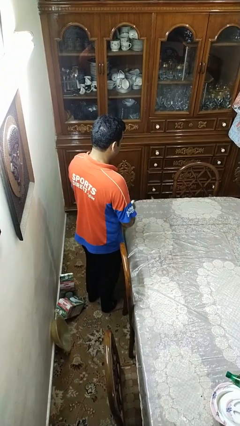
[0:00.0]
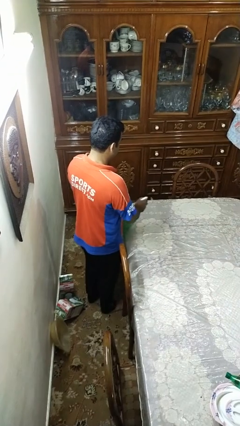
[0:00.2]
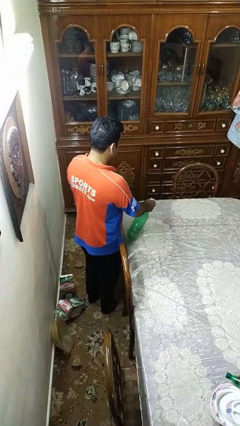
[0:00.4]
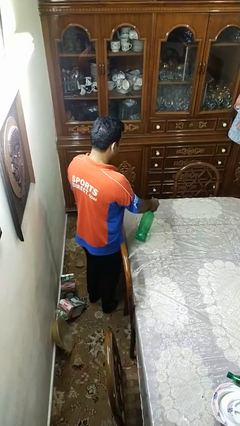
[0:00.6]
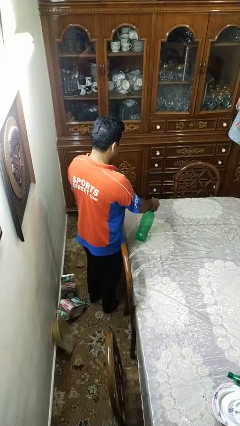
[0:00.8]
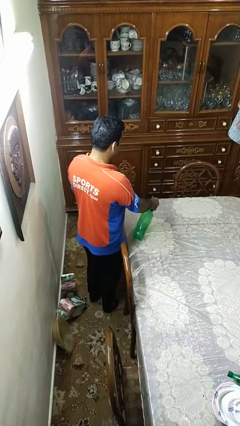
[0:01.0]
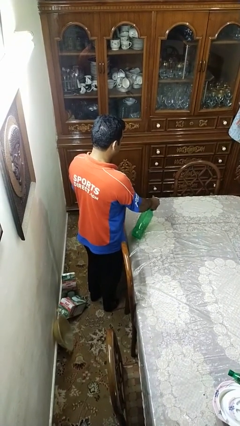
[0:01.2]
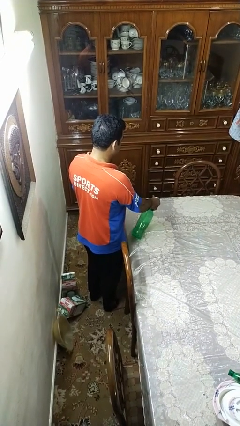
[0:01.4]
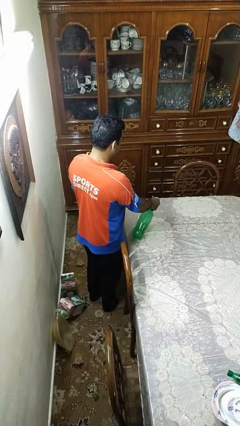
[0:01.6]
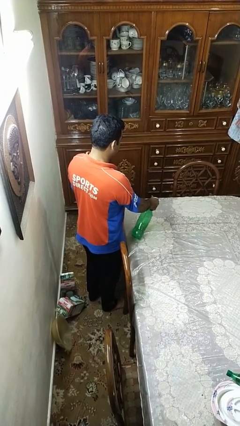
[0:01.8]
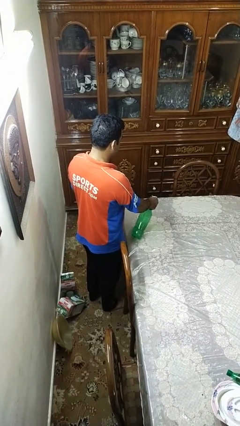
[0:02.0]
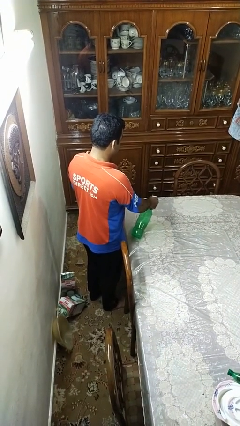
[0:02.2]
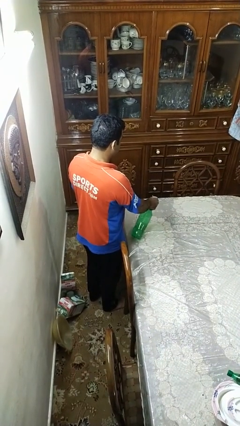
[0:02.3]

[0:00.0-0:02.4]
person sprays from bottle

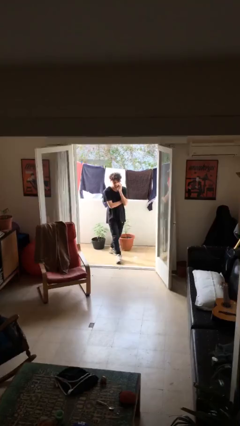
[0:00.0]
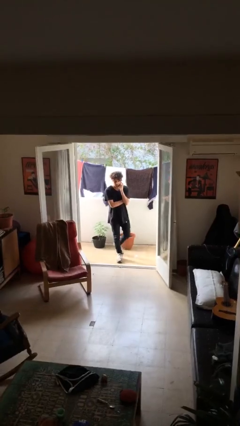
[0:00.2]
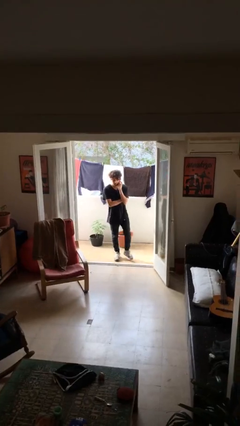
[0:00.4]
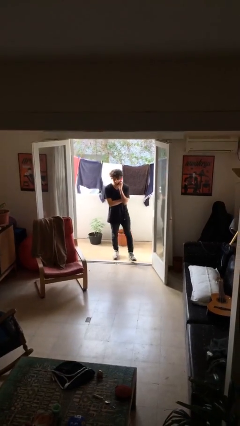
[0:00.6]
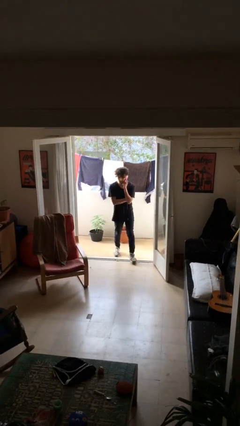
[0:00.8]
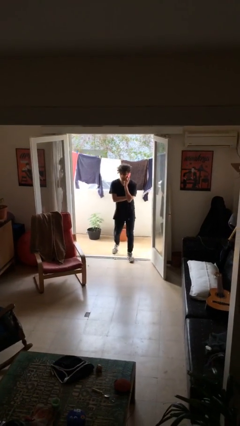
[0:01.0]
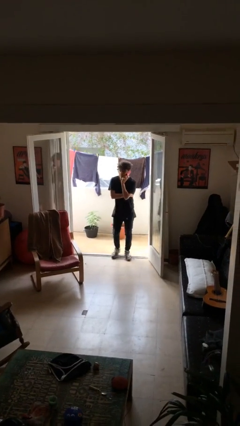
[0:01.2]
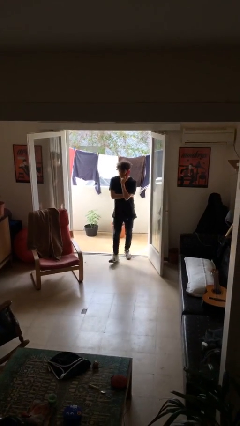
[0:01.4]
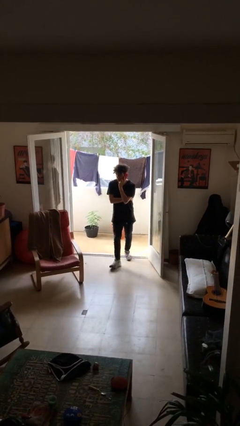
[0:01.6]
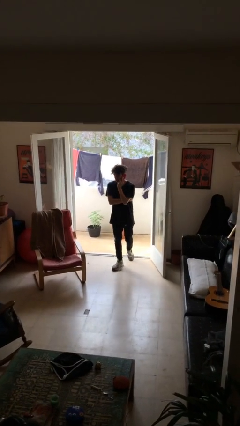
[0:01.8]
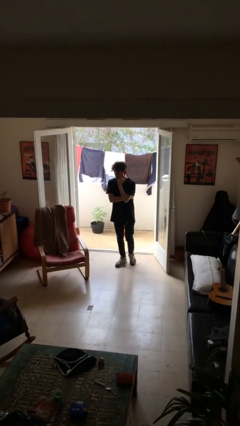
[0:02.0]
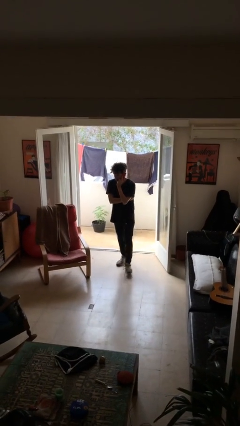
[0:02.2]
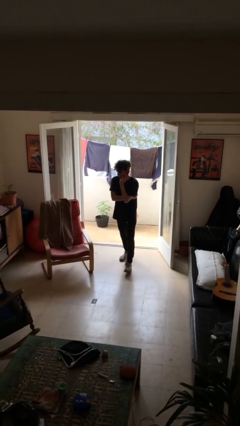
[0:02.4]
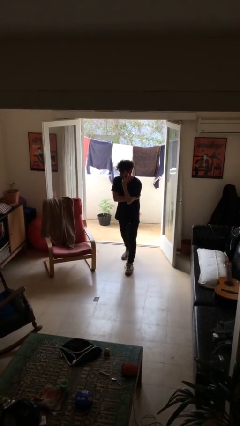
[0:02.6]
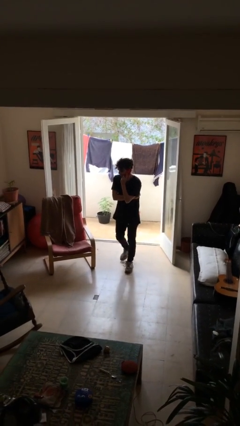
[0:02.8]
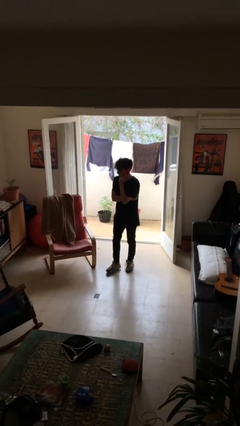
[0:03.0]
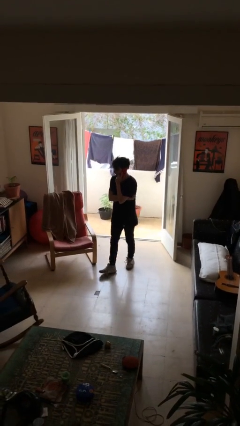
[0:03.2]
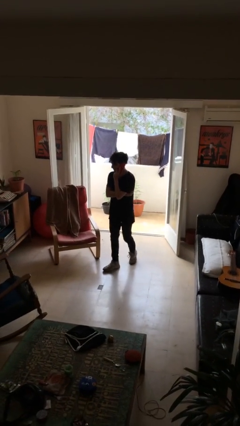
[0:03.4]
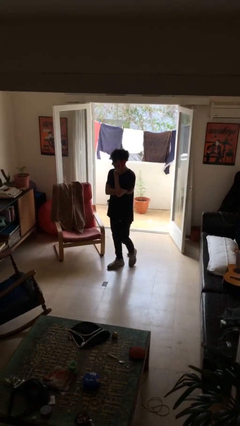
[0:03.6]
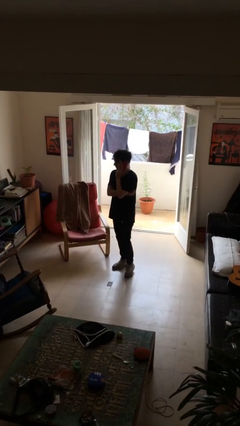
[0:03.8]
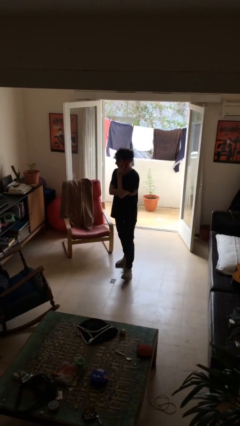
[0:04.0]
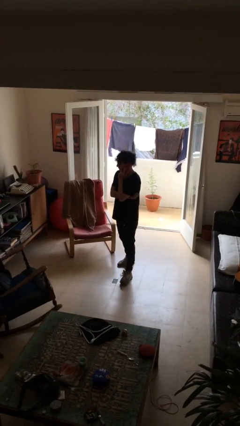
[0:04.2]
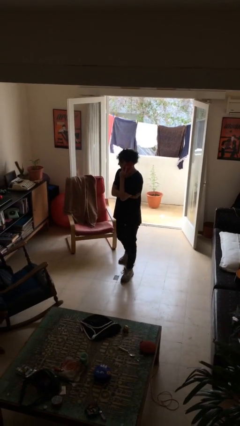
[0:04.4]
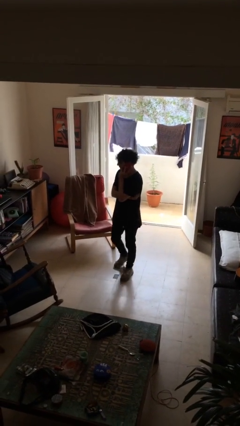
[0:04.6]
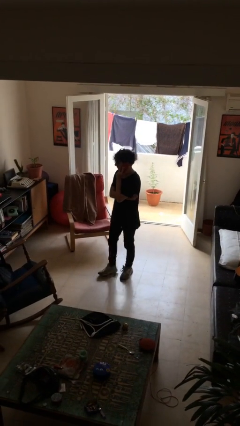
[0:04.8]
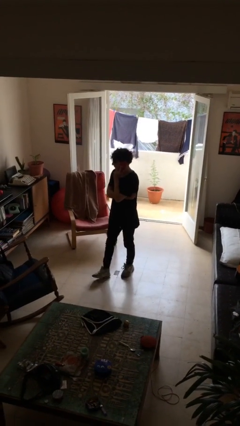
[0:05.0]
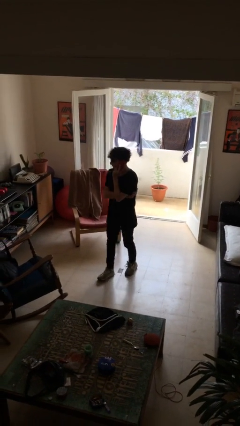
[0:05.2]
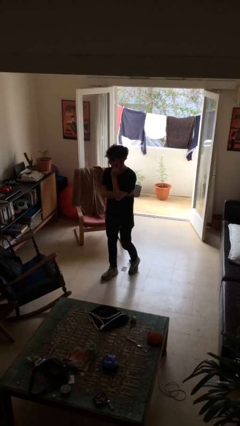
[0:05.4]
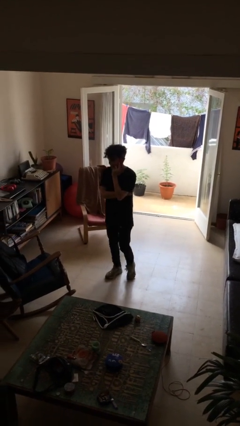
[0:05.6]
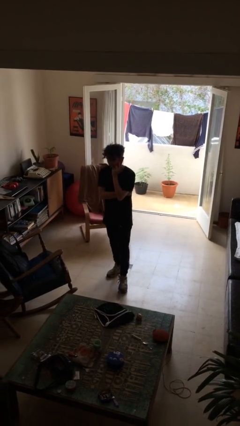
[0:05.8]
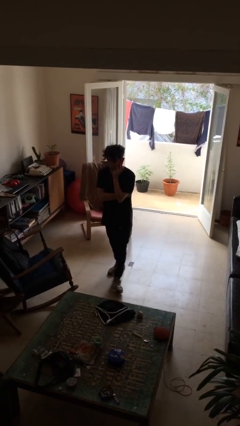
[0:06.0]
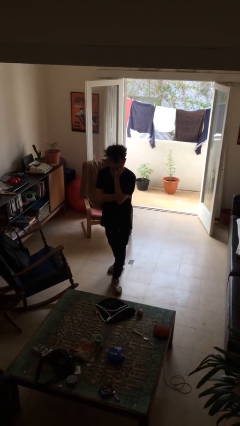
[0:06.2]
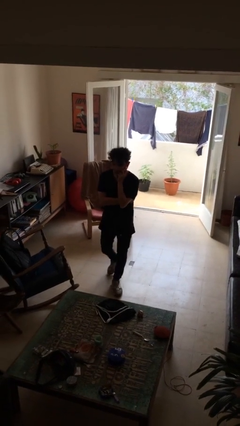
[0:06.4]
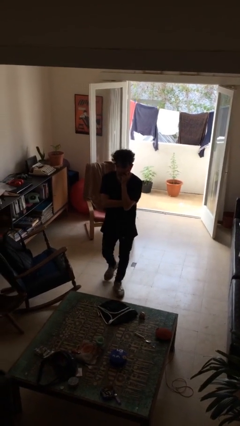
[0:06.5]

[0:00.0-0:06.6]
person enters scene through structure

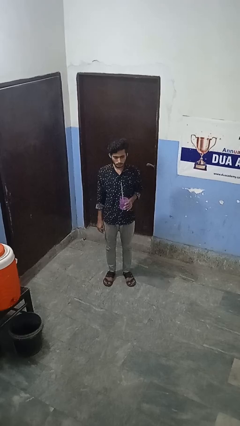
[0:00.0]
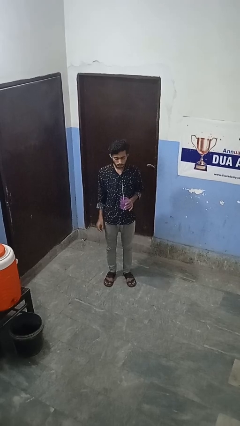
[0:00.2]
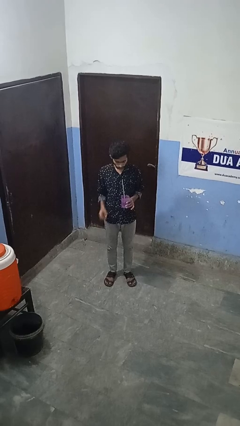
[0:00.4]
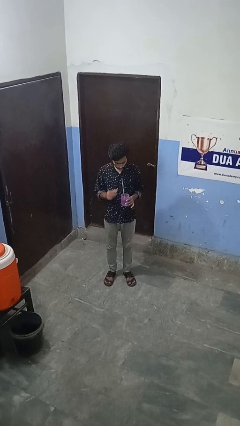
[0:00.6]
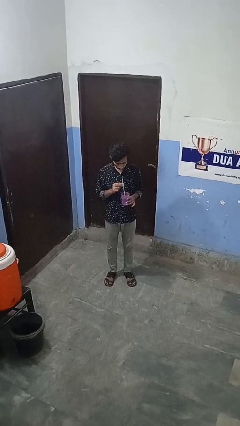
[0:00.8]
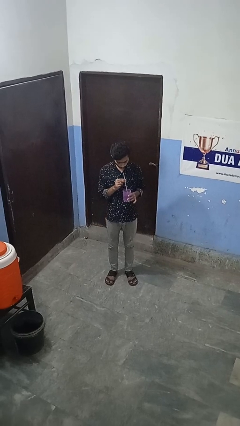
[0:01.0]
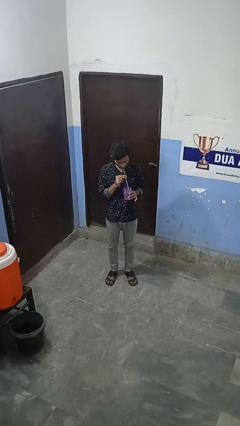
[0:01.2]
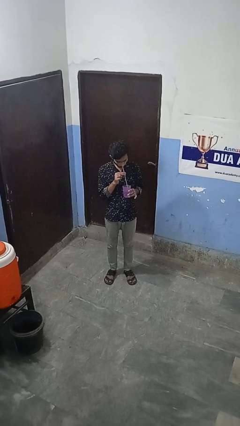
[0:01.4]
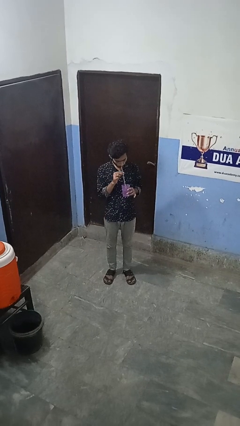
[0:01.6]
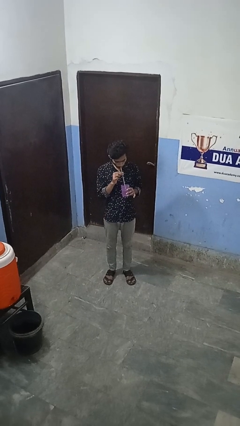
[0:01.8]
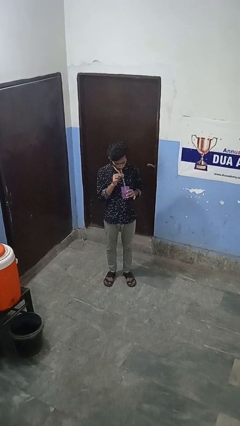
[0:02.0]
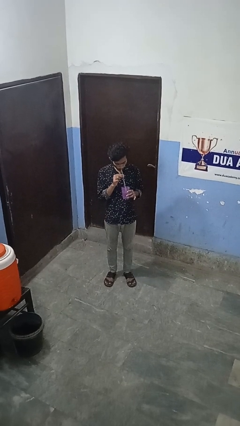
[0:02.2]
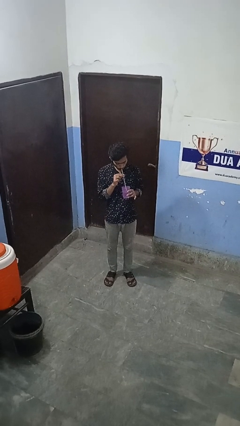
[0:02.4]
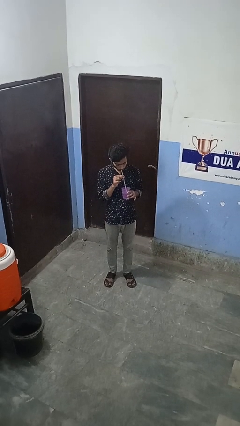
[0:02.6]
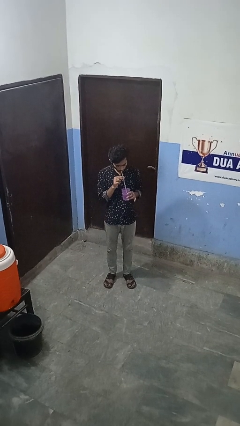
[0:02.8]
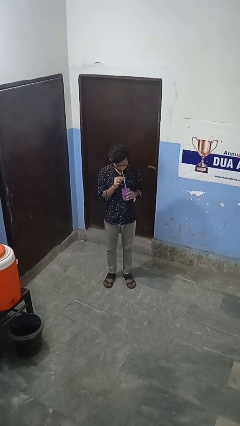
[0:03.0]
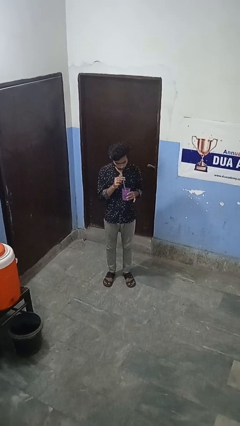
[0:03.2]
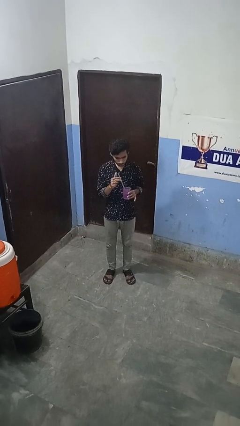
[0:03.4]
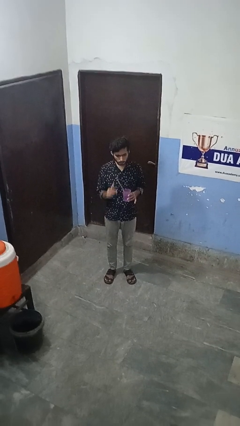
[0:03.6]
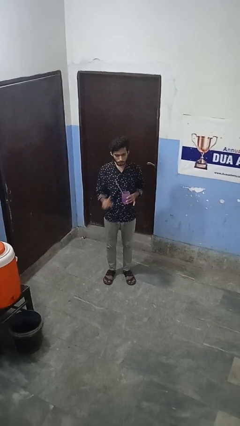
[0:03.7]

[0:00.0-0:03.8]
person drinks from straw

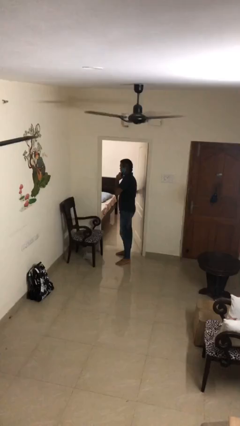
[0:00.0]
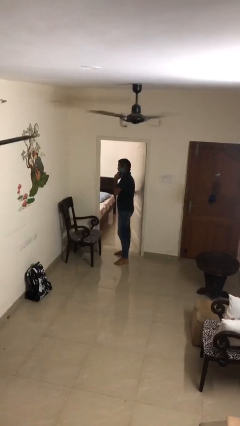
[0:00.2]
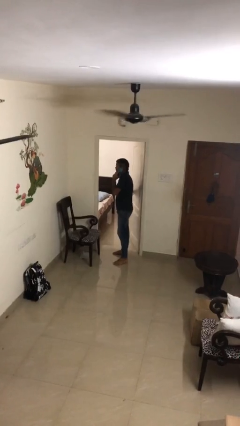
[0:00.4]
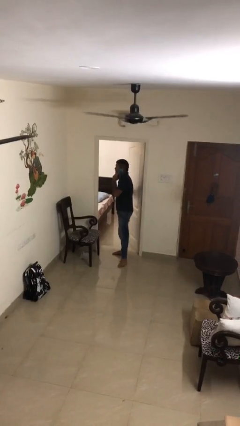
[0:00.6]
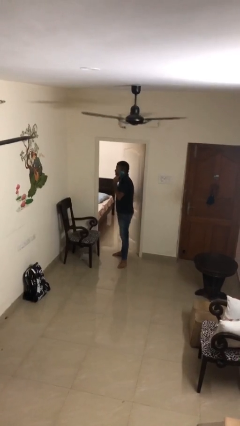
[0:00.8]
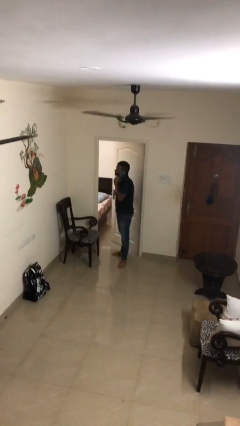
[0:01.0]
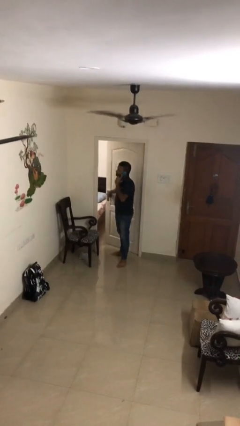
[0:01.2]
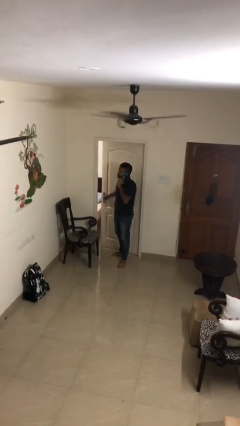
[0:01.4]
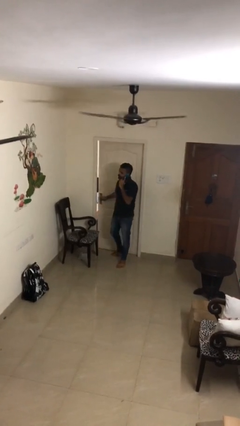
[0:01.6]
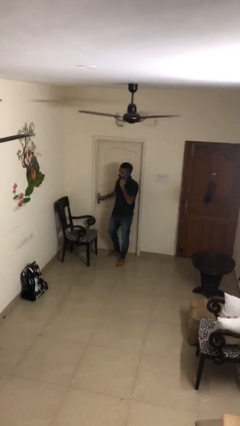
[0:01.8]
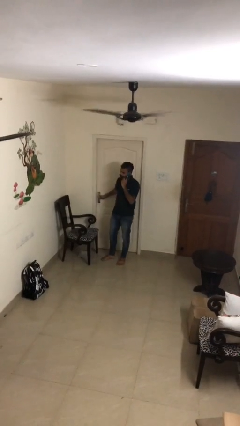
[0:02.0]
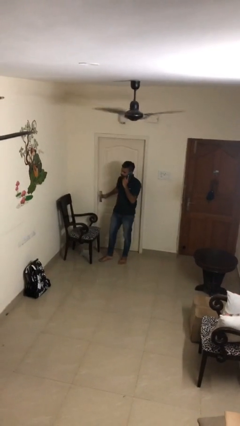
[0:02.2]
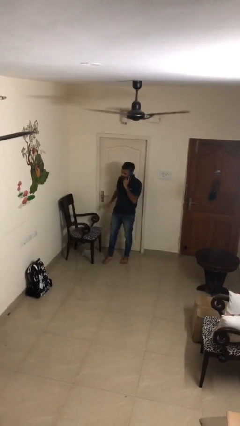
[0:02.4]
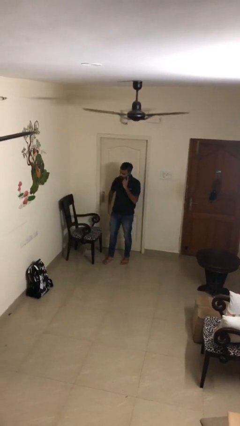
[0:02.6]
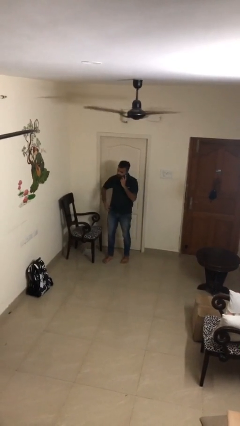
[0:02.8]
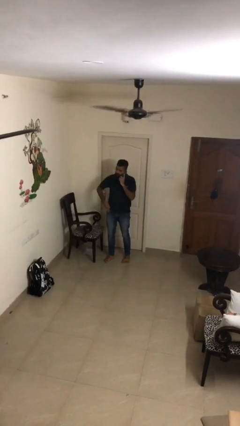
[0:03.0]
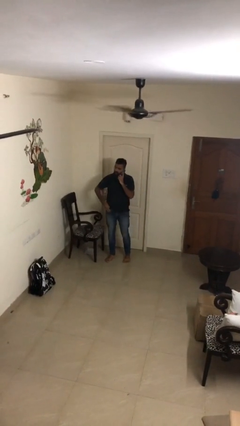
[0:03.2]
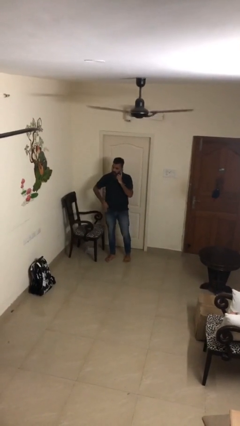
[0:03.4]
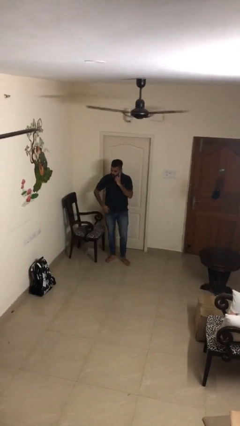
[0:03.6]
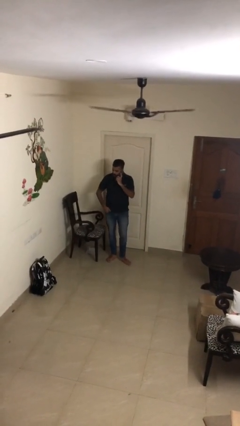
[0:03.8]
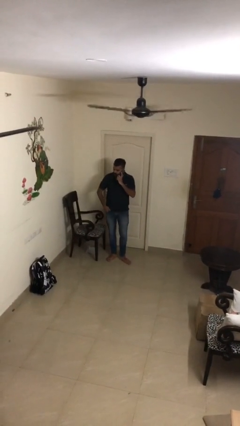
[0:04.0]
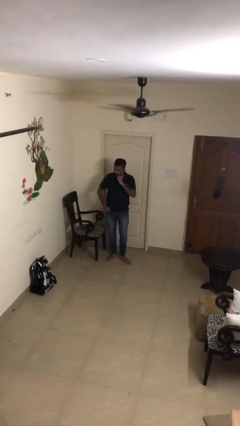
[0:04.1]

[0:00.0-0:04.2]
person closes facility door

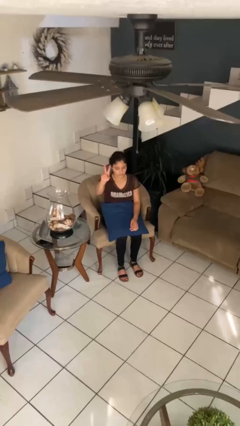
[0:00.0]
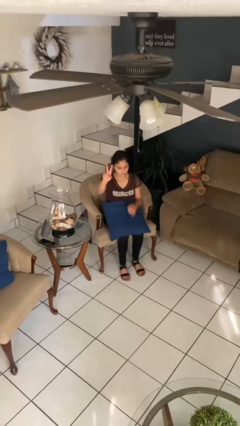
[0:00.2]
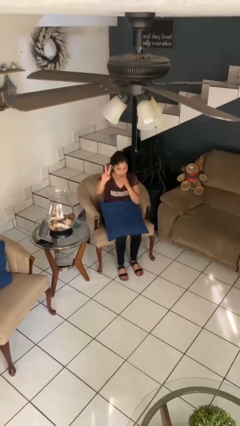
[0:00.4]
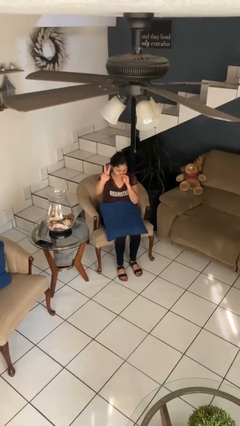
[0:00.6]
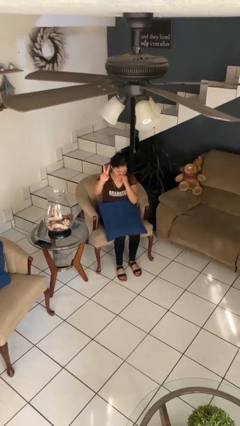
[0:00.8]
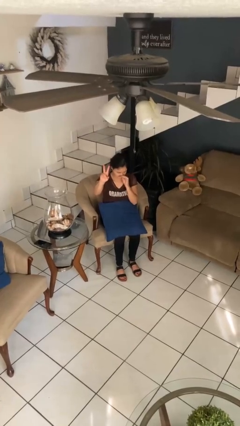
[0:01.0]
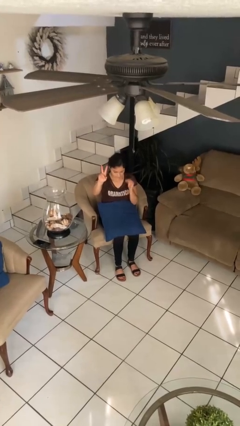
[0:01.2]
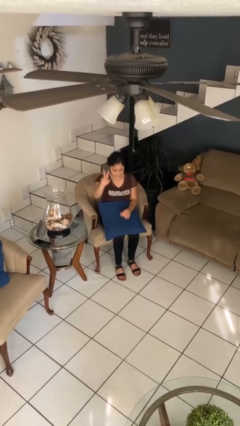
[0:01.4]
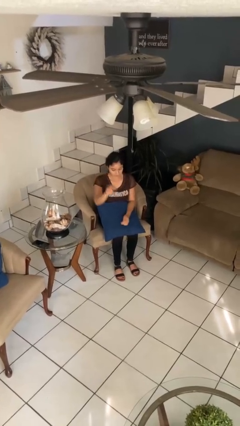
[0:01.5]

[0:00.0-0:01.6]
person gestures peace
